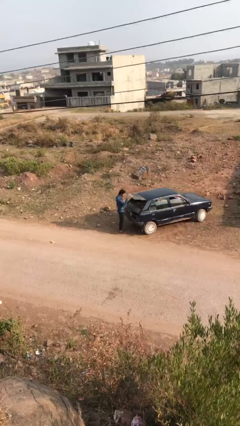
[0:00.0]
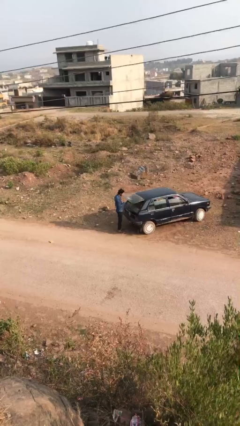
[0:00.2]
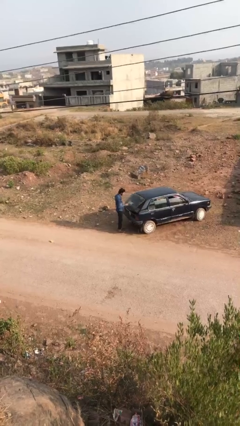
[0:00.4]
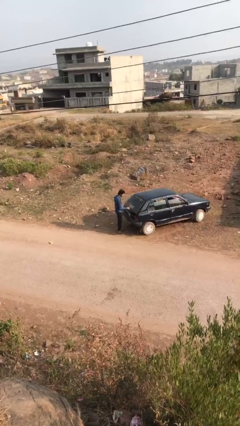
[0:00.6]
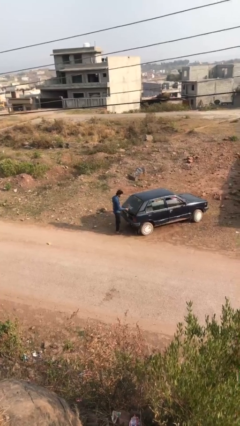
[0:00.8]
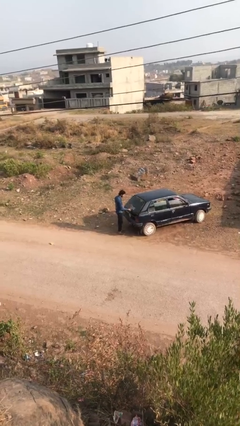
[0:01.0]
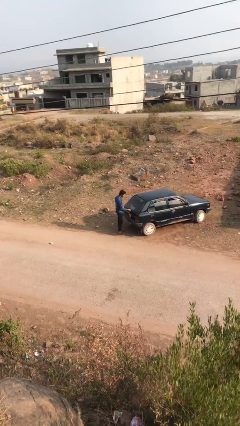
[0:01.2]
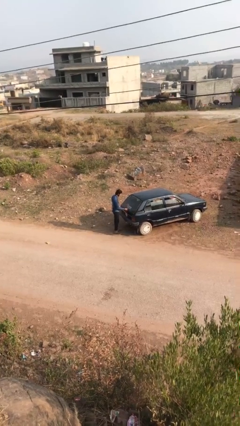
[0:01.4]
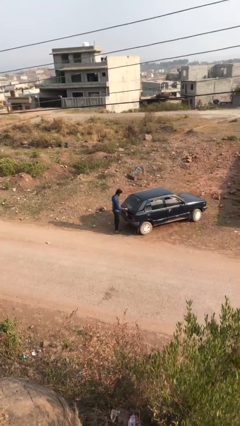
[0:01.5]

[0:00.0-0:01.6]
person closes car trunk

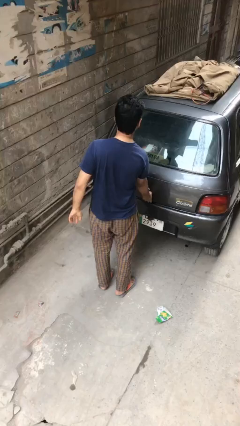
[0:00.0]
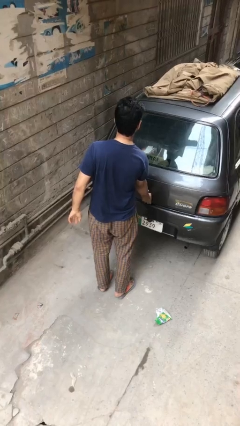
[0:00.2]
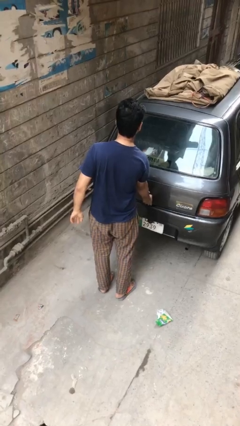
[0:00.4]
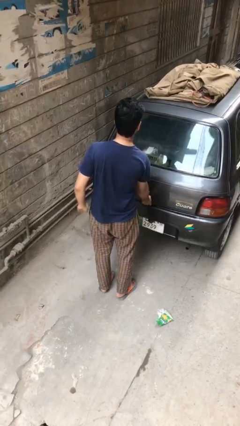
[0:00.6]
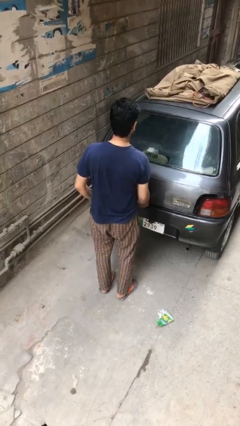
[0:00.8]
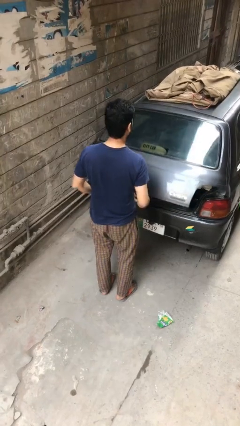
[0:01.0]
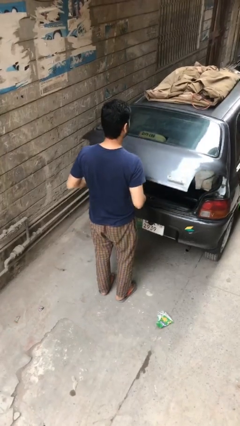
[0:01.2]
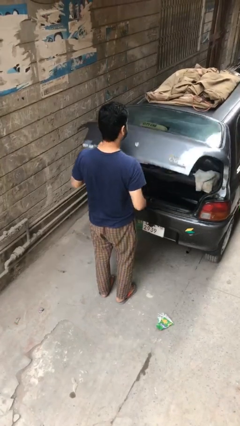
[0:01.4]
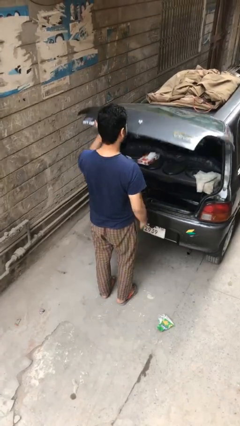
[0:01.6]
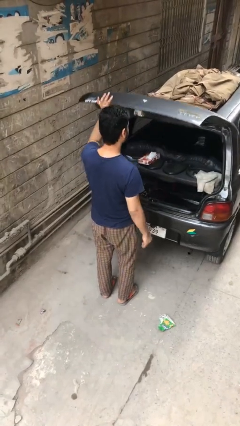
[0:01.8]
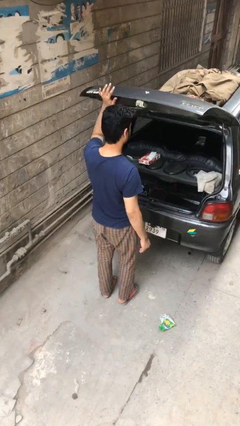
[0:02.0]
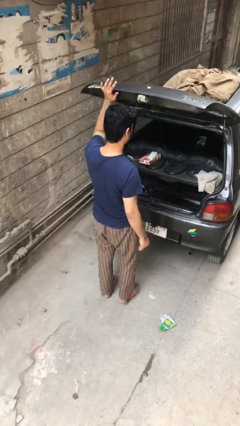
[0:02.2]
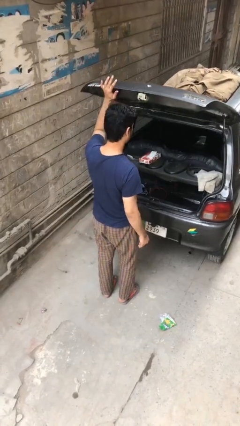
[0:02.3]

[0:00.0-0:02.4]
person opens car trunk

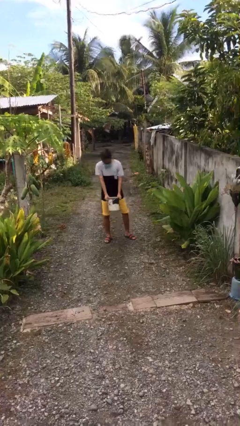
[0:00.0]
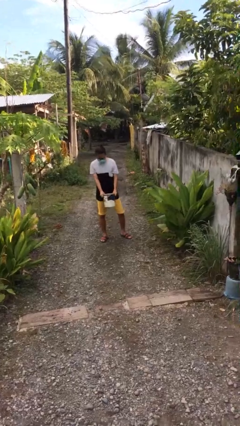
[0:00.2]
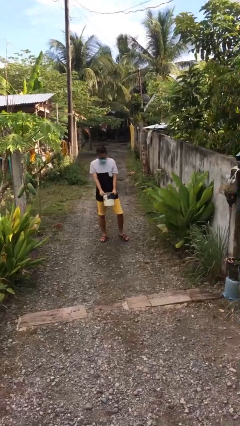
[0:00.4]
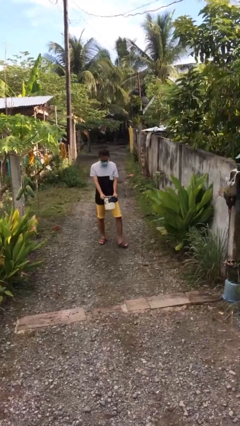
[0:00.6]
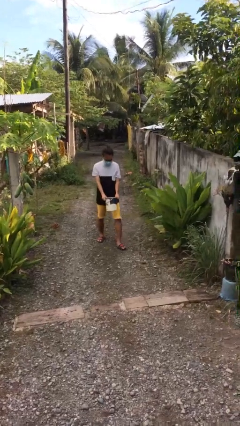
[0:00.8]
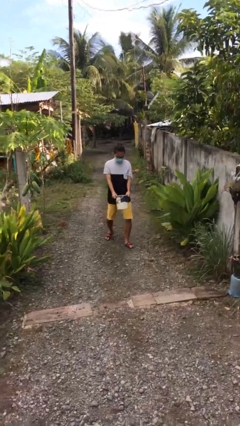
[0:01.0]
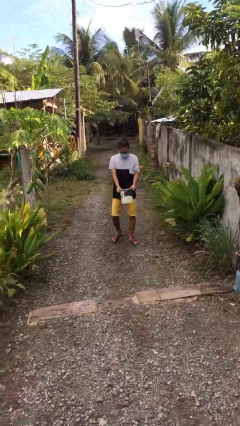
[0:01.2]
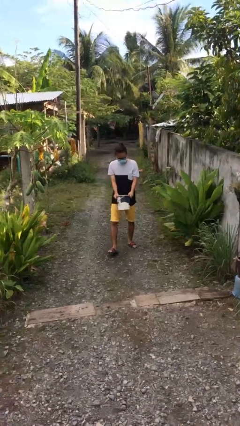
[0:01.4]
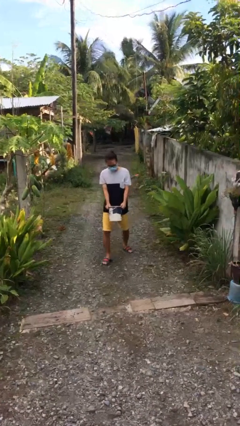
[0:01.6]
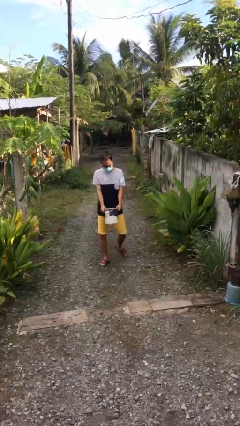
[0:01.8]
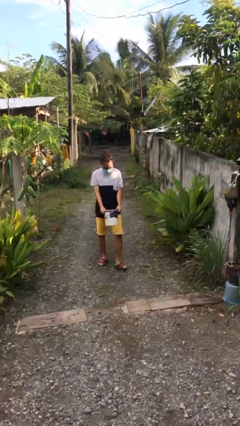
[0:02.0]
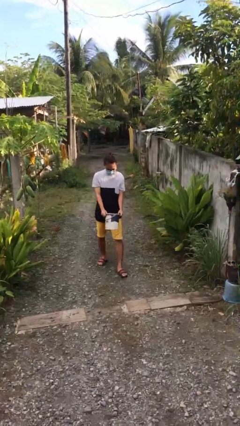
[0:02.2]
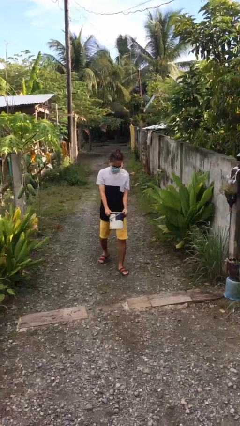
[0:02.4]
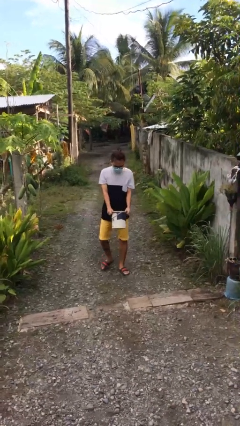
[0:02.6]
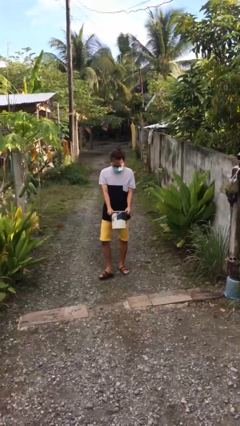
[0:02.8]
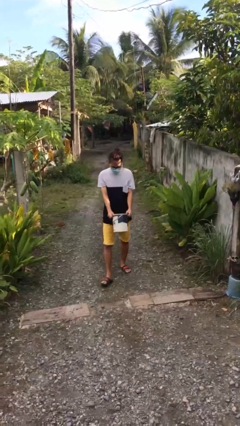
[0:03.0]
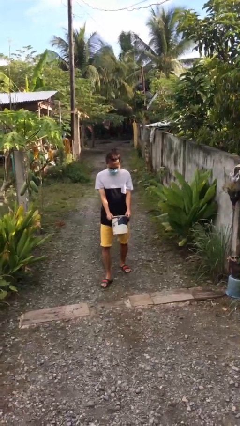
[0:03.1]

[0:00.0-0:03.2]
person carries heavy object

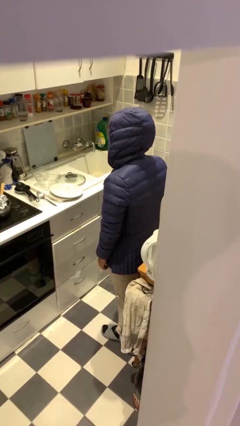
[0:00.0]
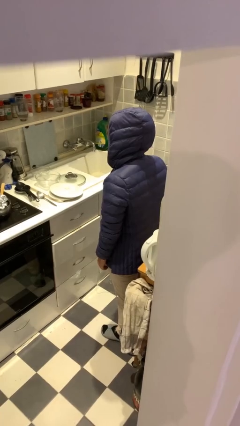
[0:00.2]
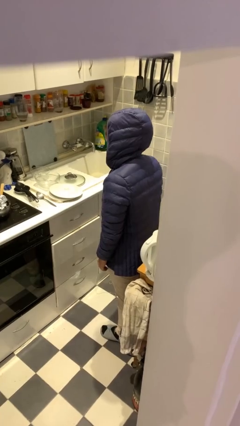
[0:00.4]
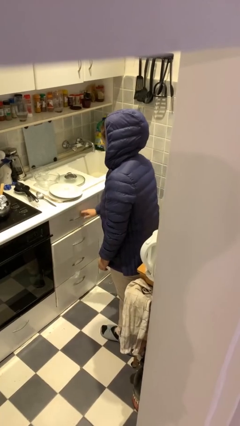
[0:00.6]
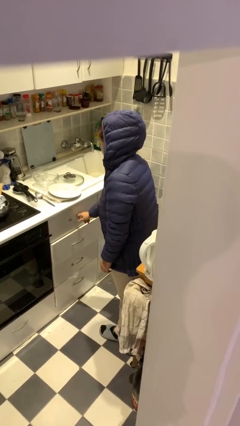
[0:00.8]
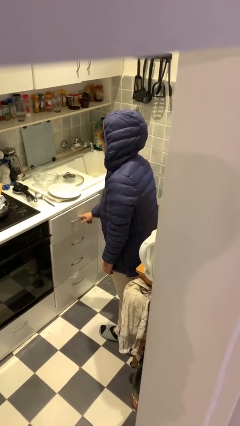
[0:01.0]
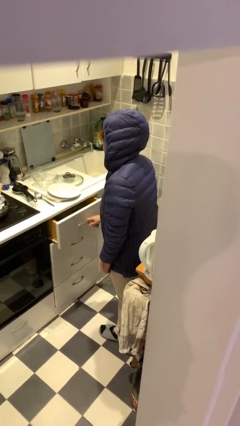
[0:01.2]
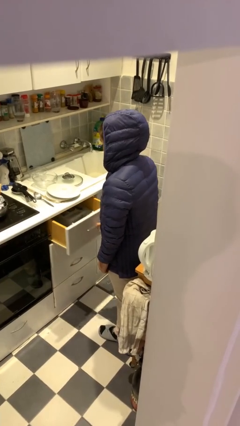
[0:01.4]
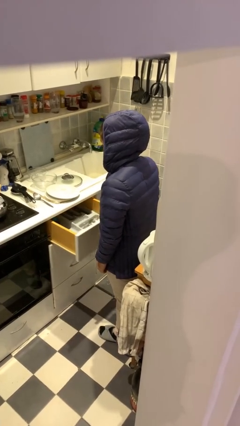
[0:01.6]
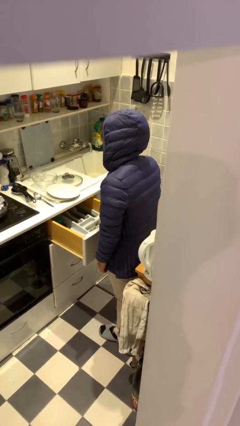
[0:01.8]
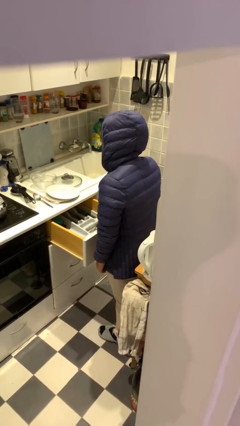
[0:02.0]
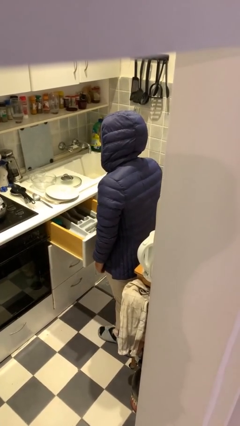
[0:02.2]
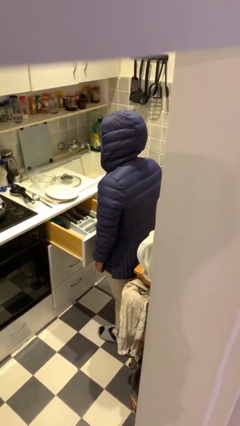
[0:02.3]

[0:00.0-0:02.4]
person opens kitchen drawer

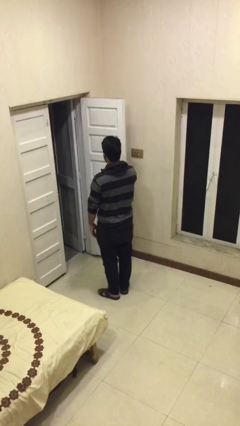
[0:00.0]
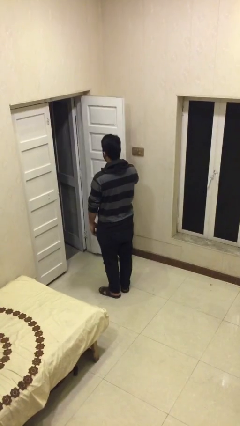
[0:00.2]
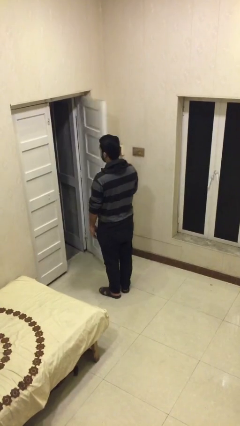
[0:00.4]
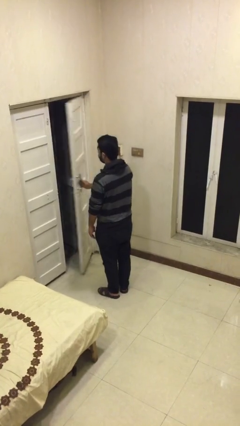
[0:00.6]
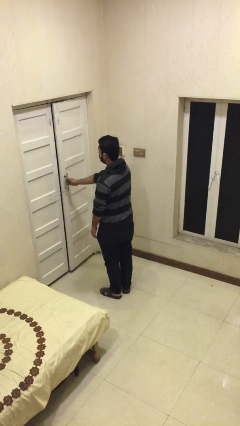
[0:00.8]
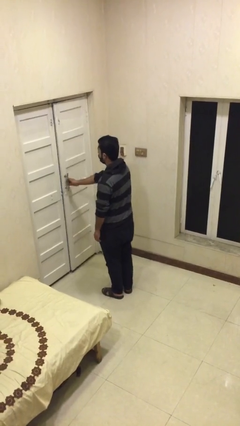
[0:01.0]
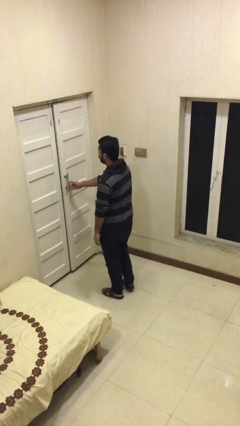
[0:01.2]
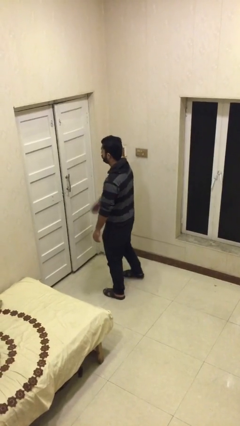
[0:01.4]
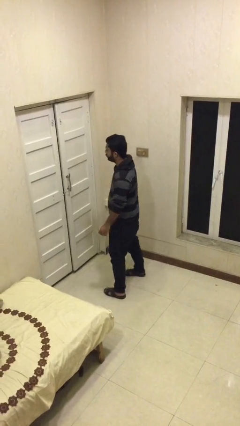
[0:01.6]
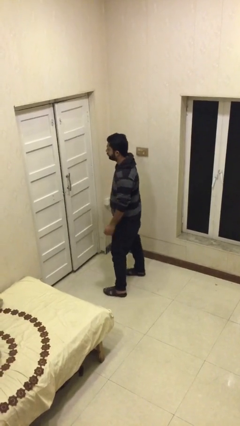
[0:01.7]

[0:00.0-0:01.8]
person closes facility door

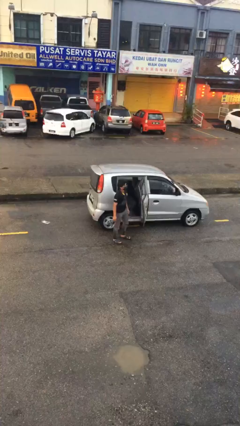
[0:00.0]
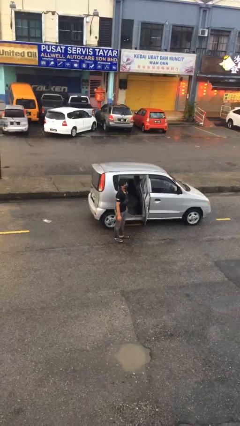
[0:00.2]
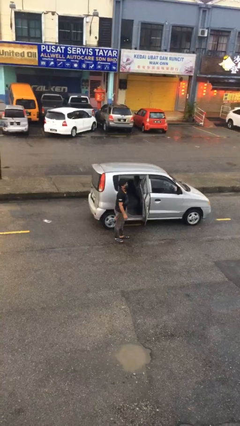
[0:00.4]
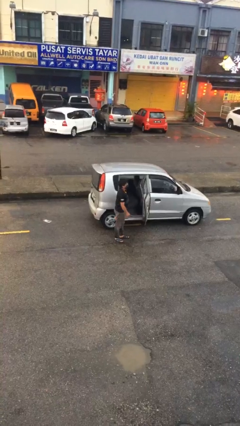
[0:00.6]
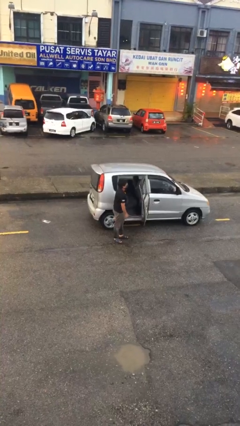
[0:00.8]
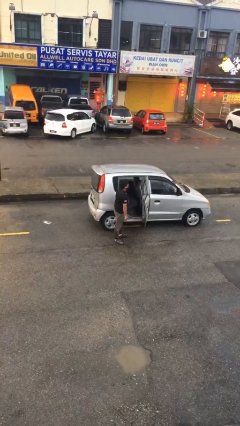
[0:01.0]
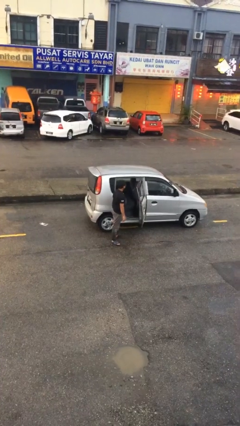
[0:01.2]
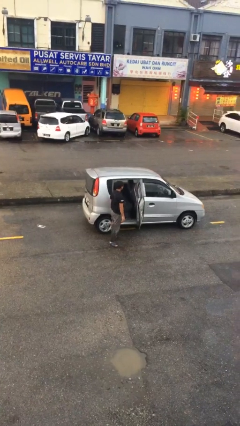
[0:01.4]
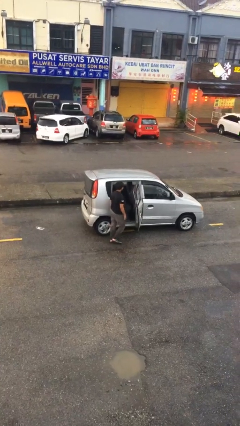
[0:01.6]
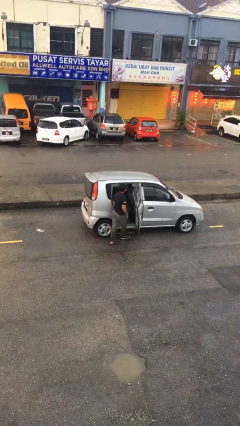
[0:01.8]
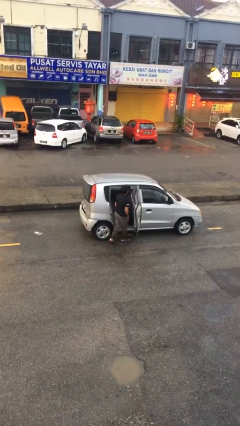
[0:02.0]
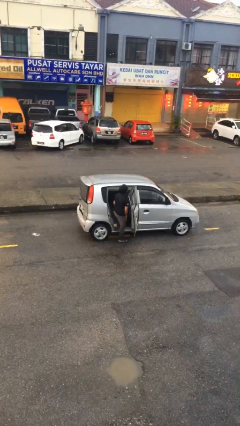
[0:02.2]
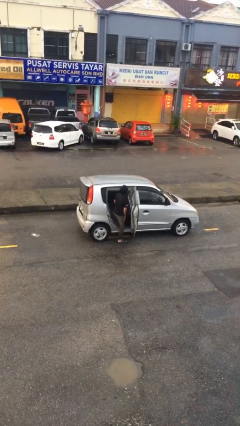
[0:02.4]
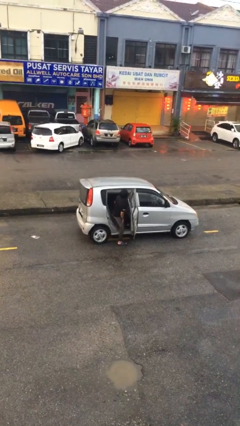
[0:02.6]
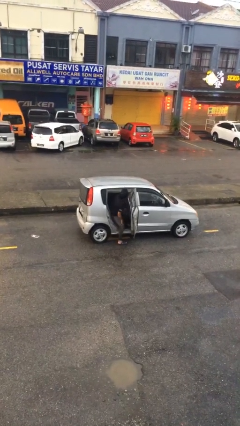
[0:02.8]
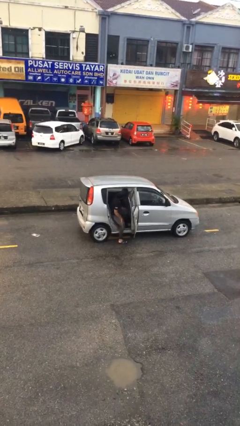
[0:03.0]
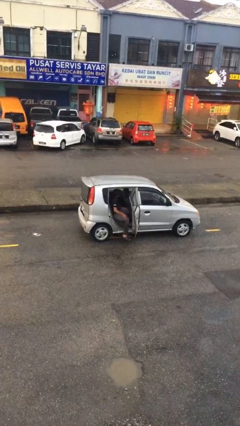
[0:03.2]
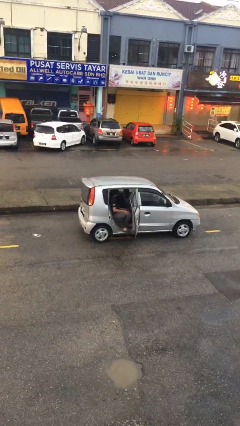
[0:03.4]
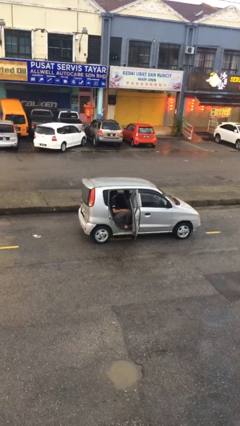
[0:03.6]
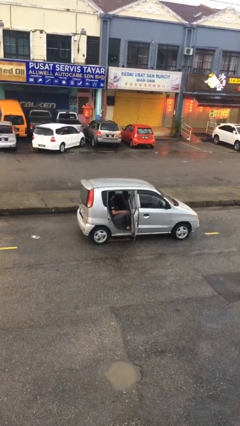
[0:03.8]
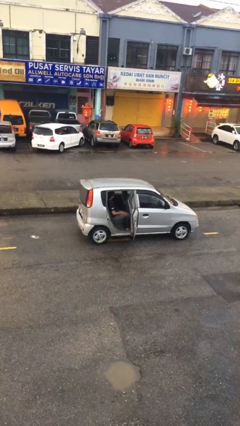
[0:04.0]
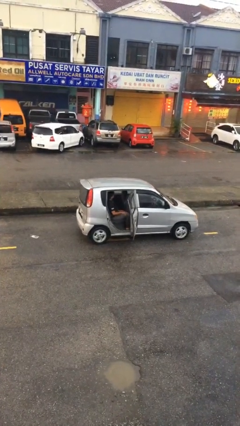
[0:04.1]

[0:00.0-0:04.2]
person enters car

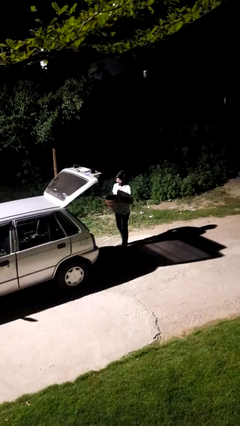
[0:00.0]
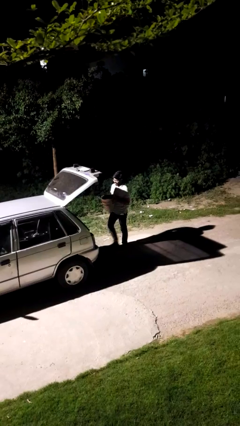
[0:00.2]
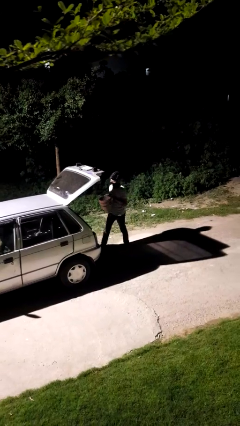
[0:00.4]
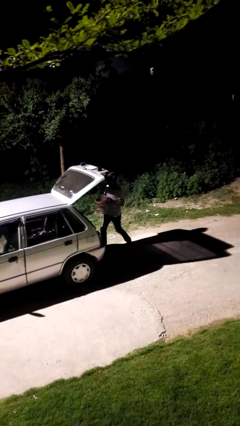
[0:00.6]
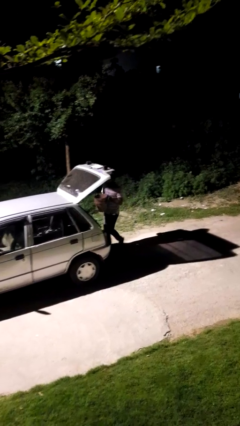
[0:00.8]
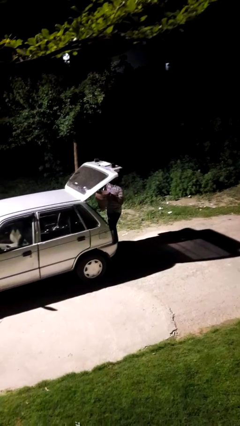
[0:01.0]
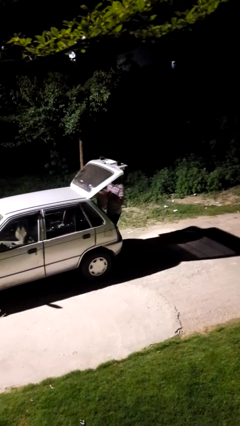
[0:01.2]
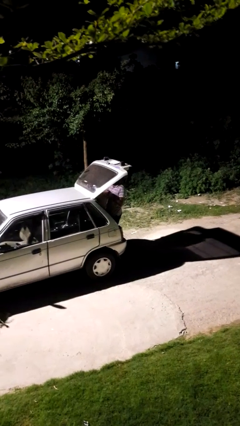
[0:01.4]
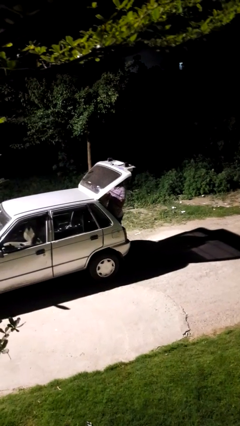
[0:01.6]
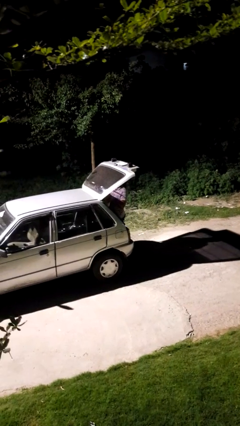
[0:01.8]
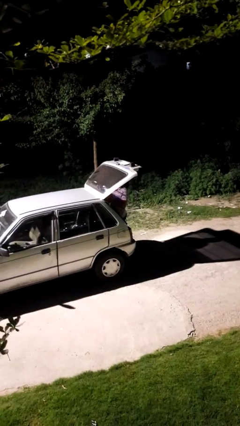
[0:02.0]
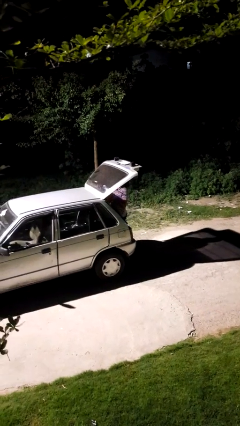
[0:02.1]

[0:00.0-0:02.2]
person loads car
